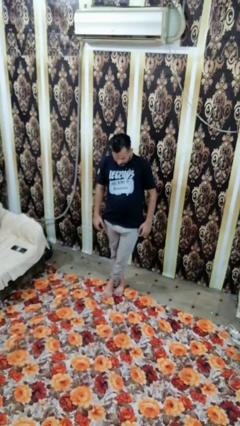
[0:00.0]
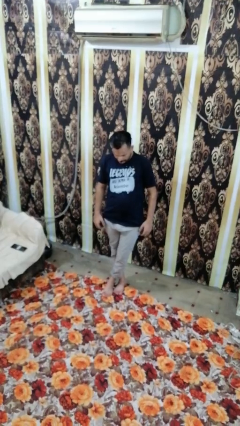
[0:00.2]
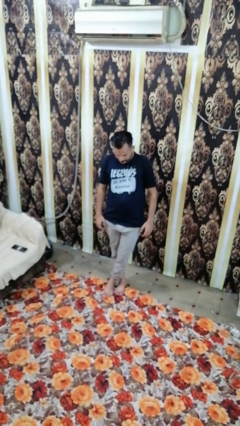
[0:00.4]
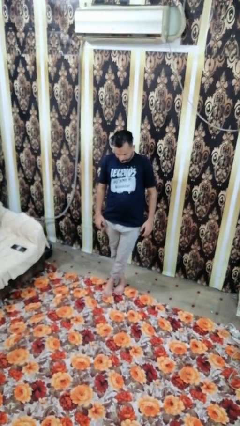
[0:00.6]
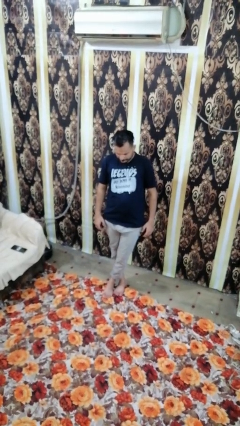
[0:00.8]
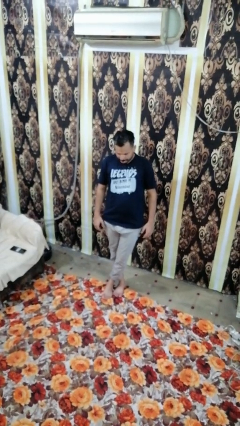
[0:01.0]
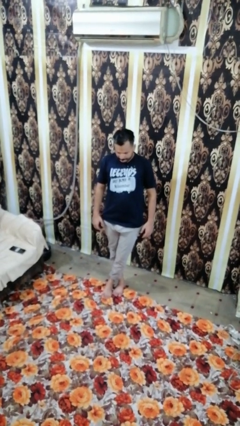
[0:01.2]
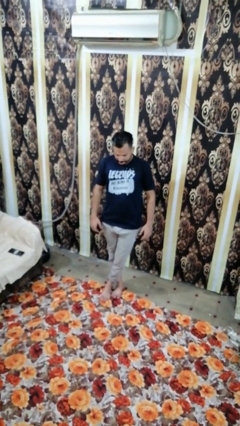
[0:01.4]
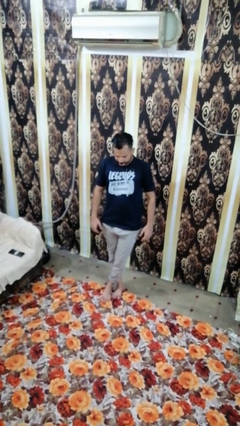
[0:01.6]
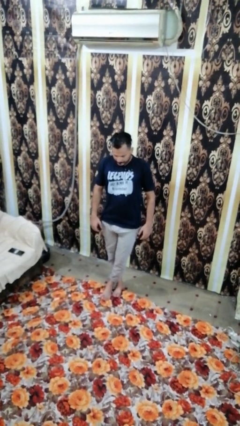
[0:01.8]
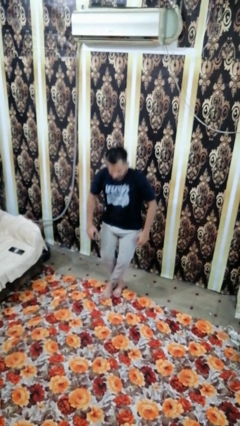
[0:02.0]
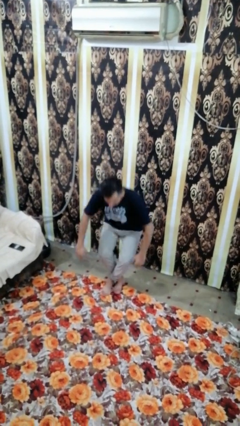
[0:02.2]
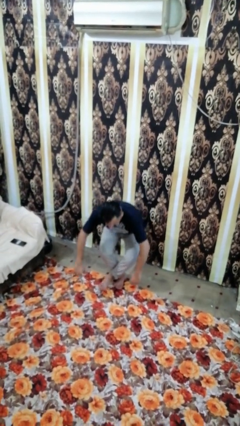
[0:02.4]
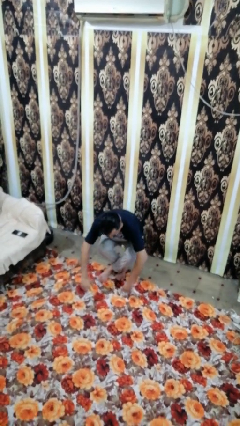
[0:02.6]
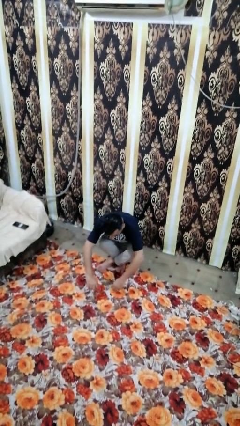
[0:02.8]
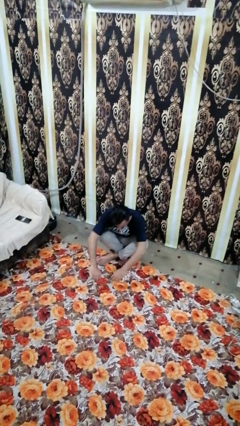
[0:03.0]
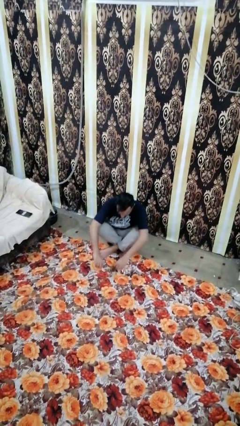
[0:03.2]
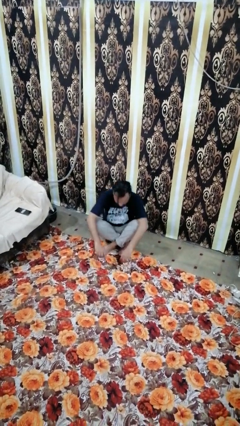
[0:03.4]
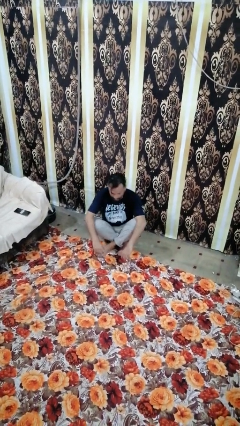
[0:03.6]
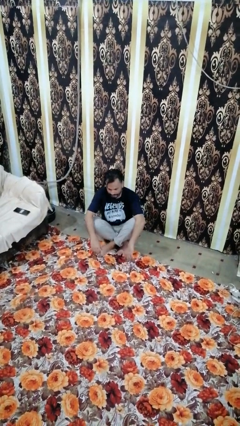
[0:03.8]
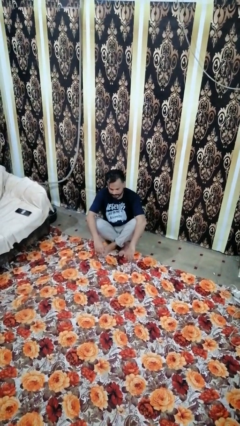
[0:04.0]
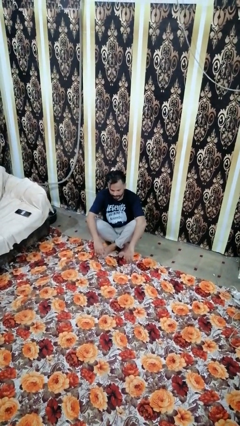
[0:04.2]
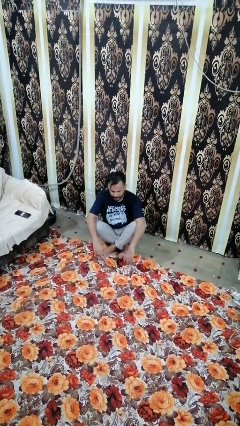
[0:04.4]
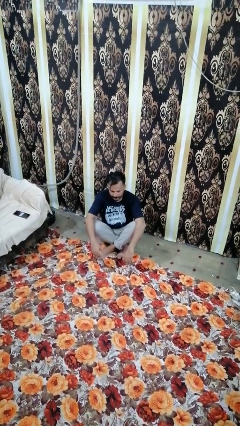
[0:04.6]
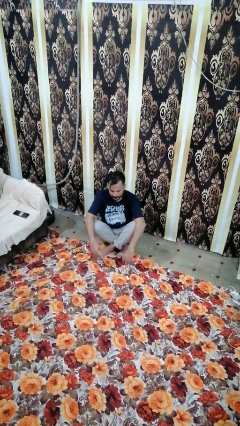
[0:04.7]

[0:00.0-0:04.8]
person sits crisscross

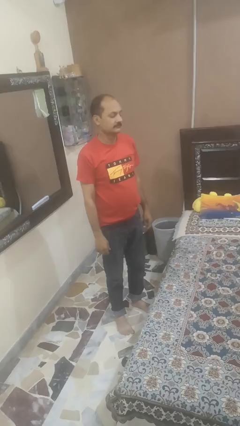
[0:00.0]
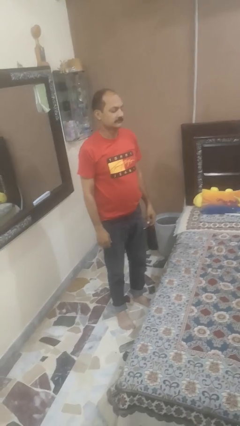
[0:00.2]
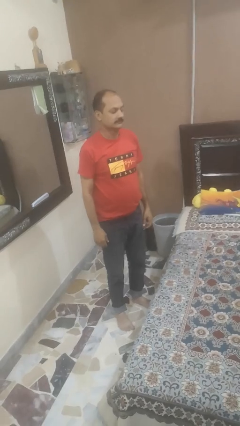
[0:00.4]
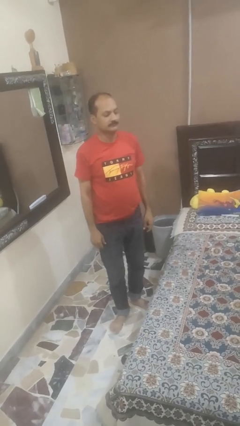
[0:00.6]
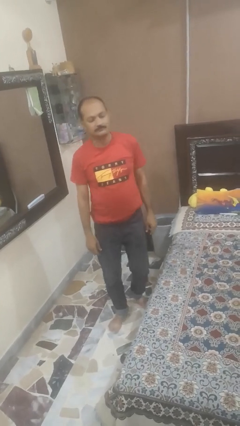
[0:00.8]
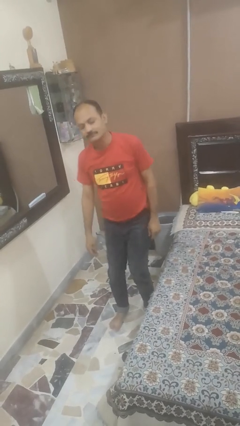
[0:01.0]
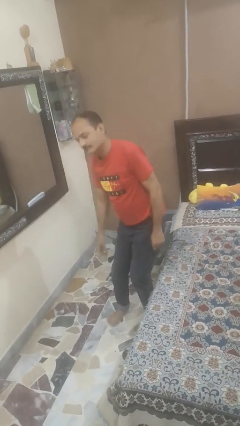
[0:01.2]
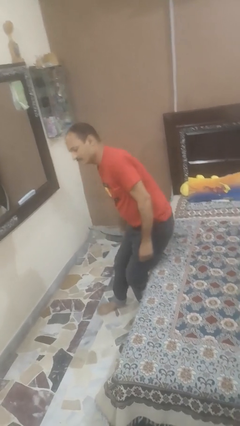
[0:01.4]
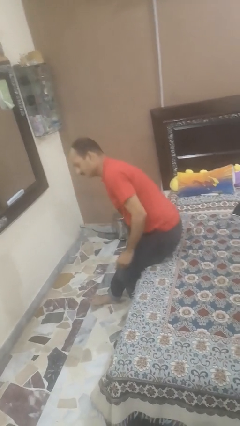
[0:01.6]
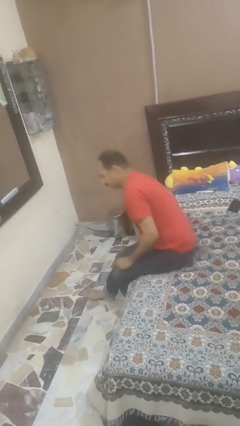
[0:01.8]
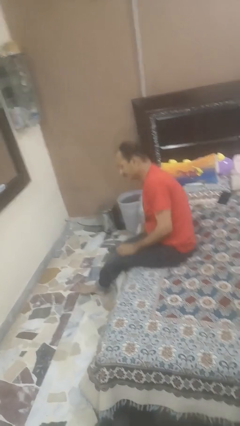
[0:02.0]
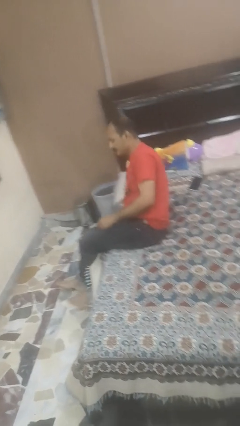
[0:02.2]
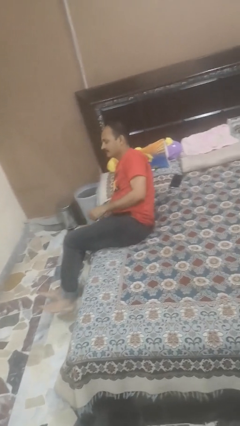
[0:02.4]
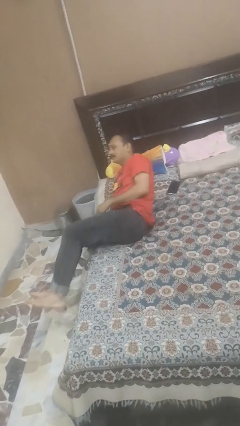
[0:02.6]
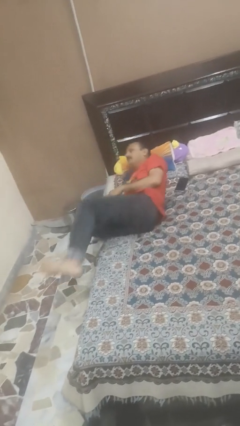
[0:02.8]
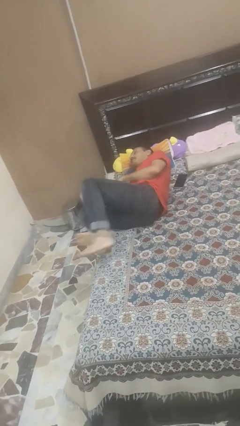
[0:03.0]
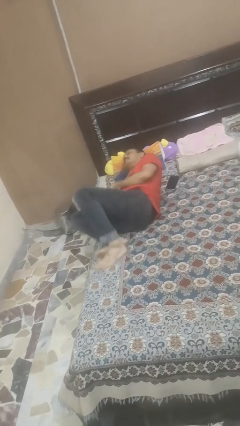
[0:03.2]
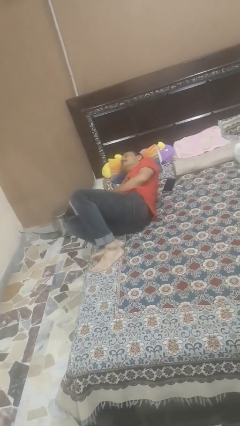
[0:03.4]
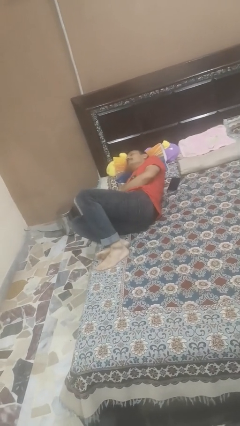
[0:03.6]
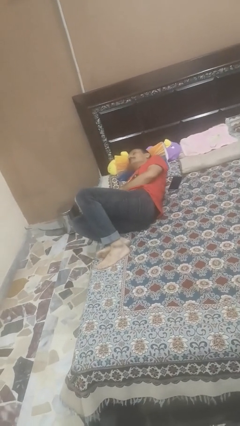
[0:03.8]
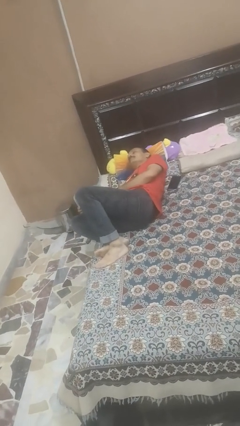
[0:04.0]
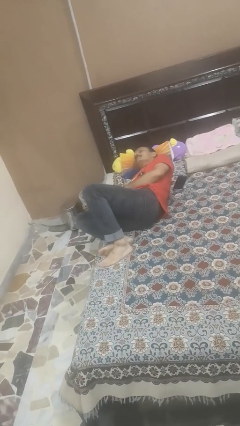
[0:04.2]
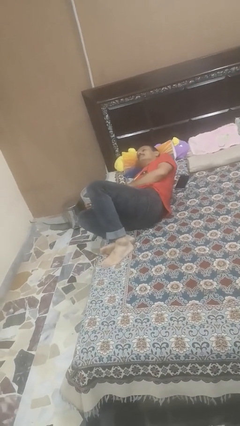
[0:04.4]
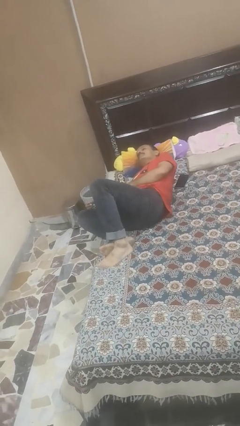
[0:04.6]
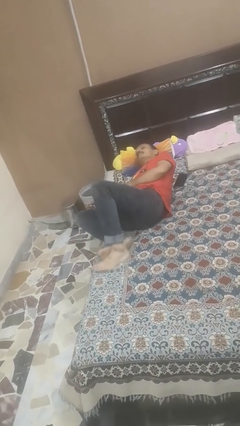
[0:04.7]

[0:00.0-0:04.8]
person lies down on bed

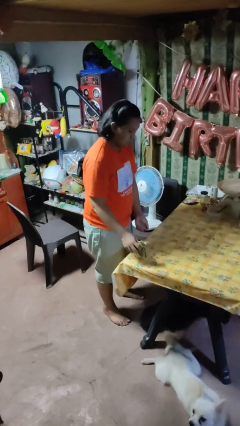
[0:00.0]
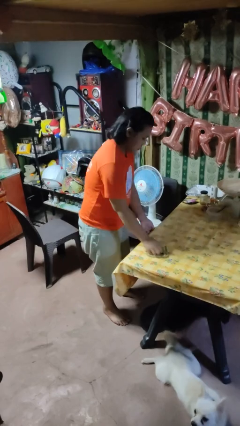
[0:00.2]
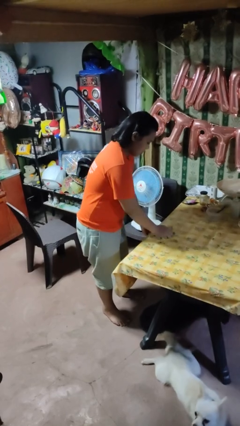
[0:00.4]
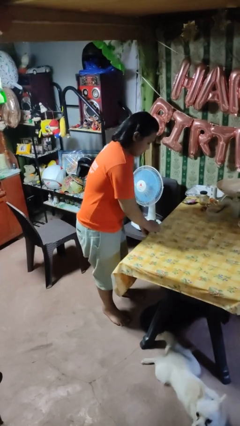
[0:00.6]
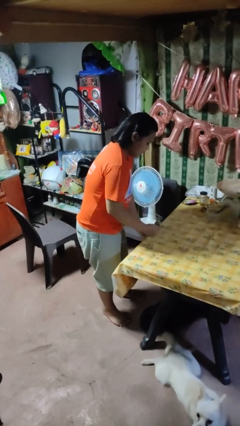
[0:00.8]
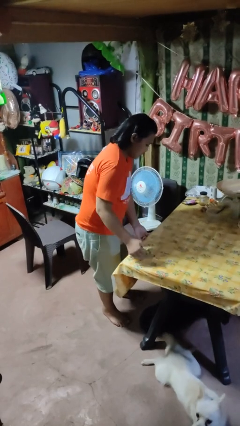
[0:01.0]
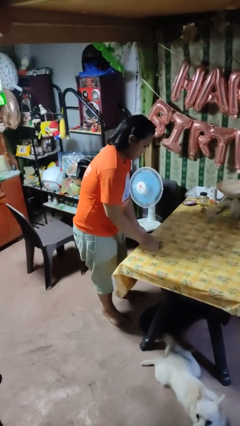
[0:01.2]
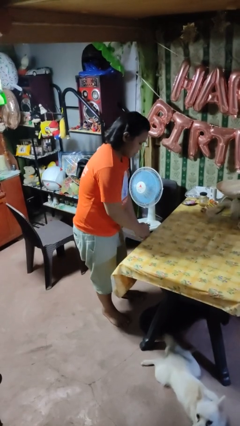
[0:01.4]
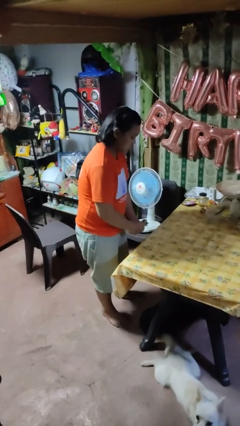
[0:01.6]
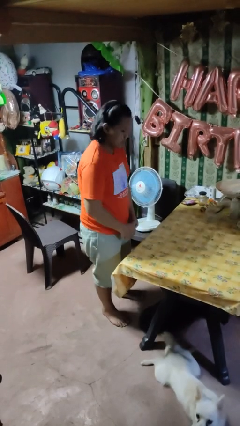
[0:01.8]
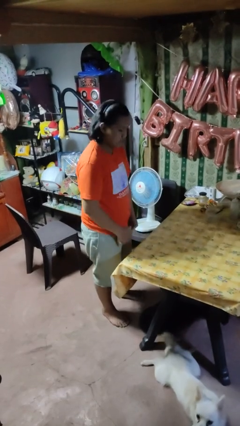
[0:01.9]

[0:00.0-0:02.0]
person cleans table with rag

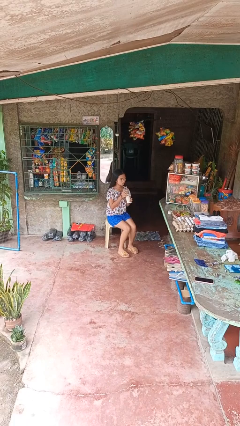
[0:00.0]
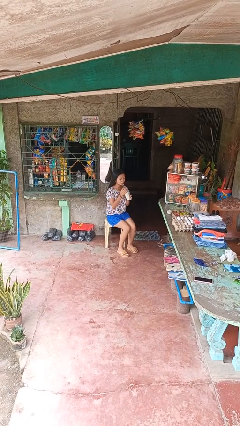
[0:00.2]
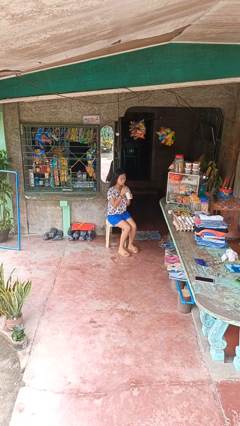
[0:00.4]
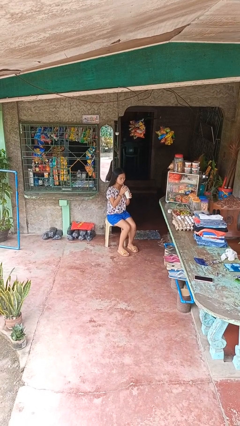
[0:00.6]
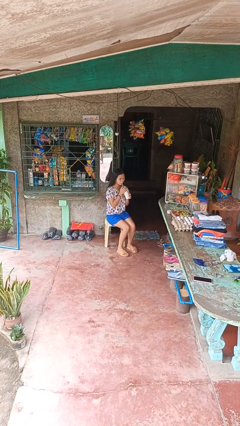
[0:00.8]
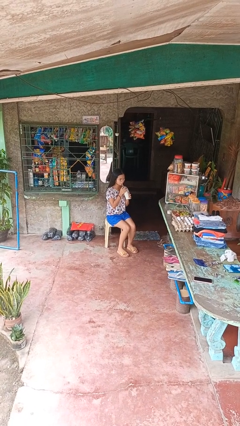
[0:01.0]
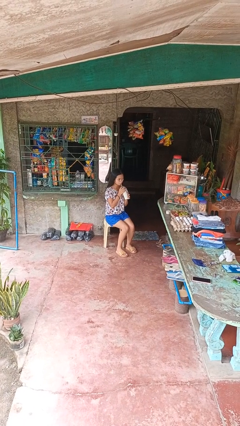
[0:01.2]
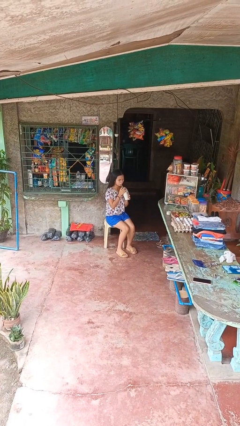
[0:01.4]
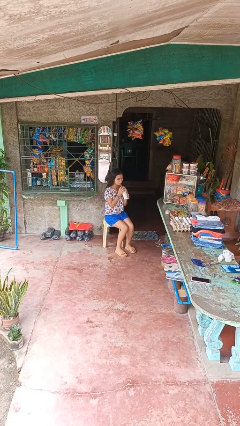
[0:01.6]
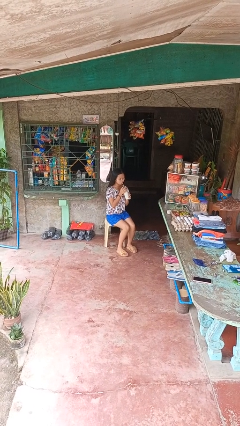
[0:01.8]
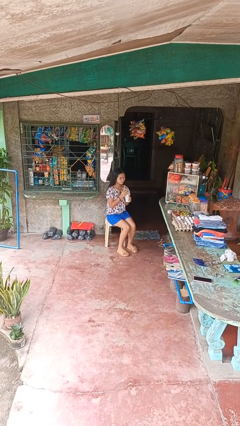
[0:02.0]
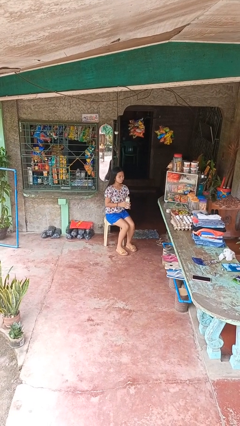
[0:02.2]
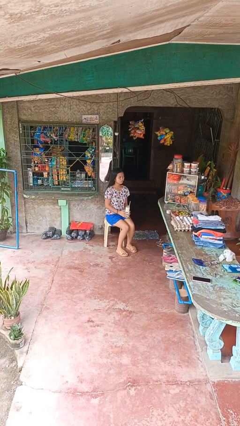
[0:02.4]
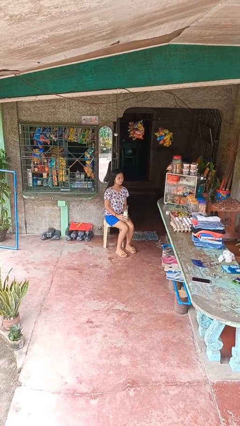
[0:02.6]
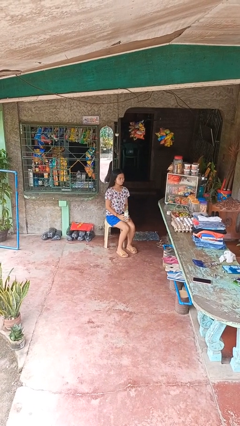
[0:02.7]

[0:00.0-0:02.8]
person drinks from straw

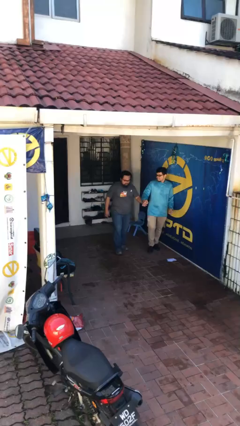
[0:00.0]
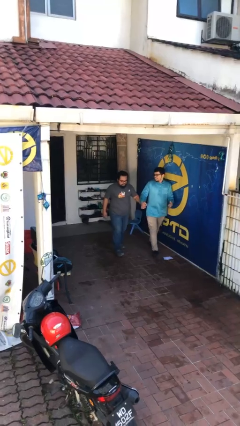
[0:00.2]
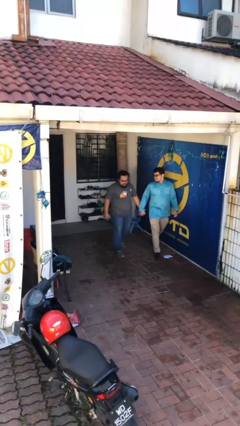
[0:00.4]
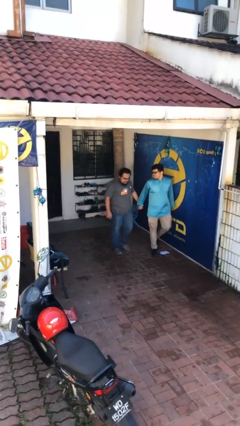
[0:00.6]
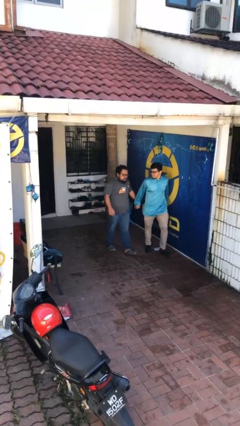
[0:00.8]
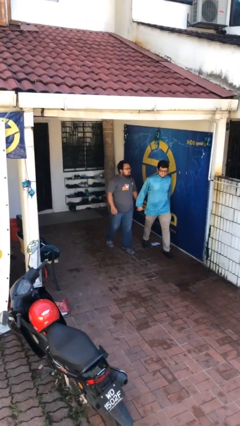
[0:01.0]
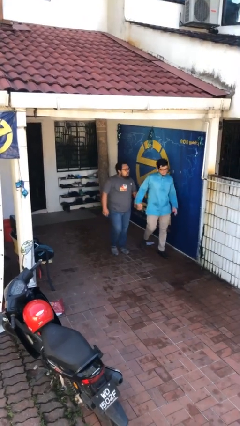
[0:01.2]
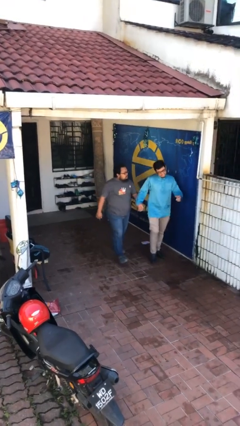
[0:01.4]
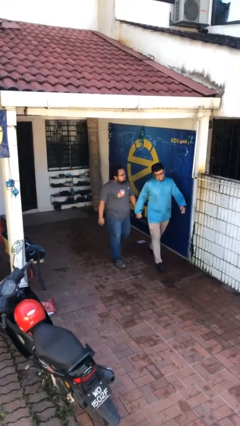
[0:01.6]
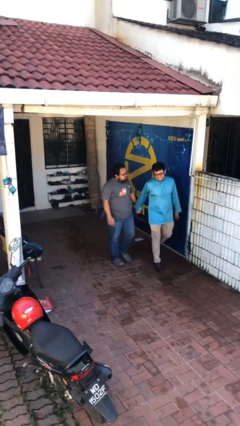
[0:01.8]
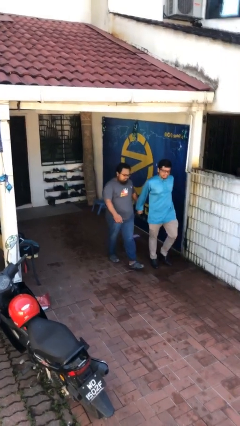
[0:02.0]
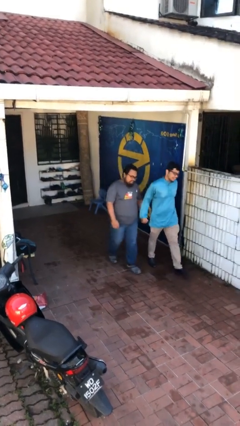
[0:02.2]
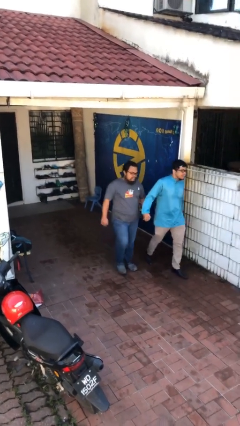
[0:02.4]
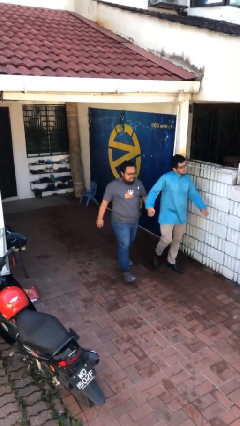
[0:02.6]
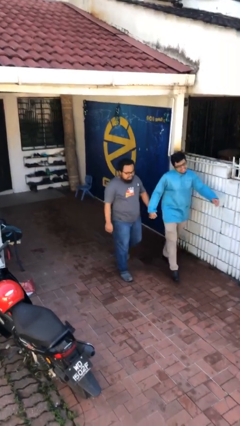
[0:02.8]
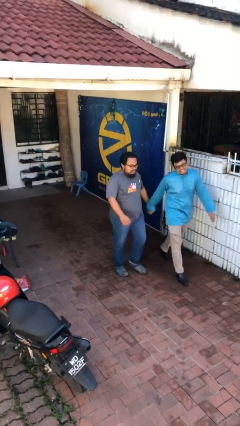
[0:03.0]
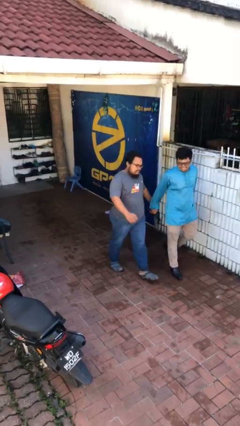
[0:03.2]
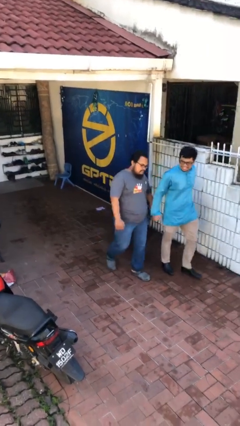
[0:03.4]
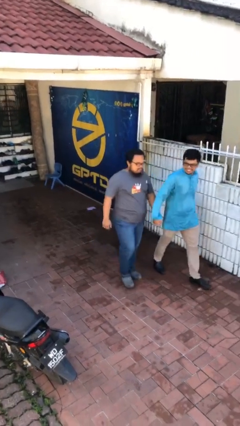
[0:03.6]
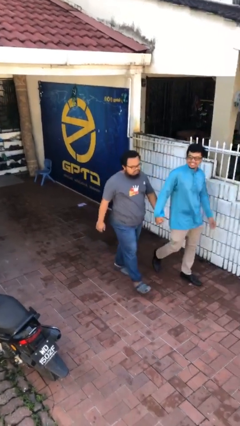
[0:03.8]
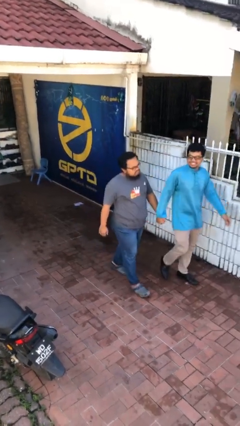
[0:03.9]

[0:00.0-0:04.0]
person holds hand
